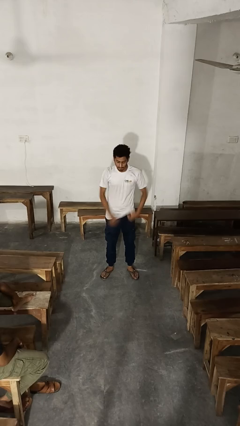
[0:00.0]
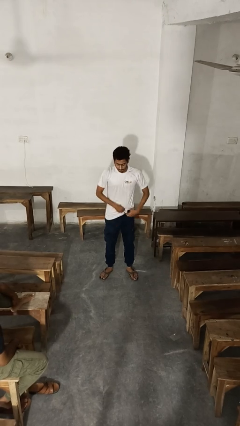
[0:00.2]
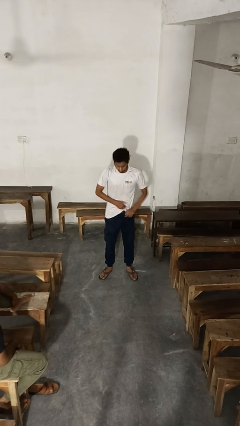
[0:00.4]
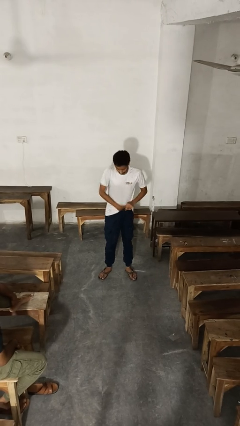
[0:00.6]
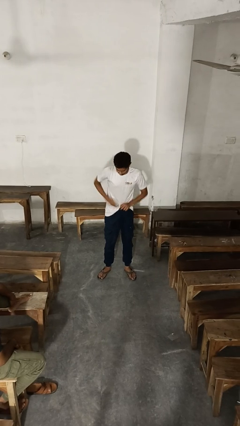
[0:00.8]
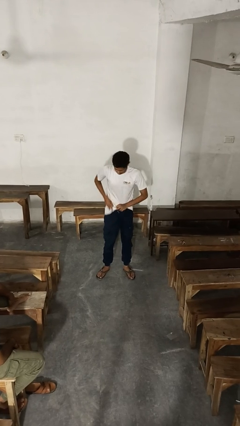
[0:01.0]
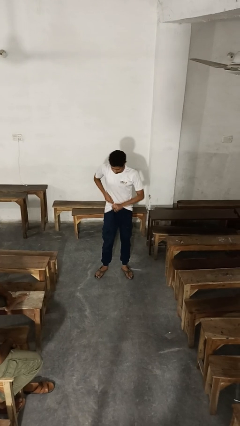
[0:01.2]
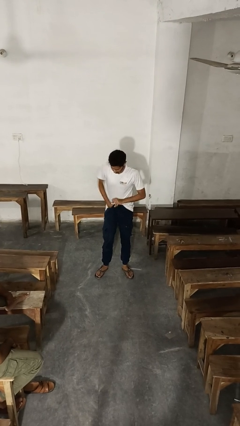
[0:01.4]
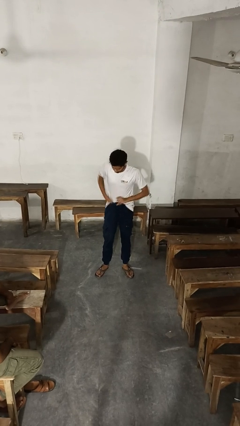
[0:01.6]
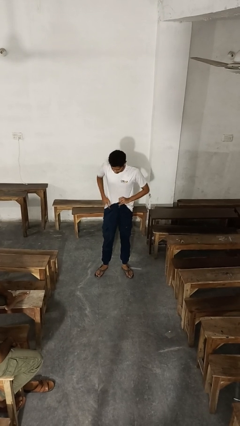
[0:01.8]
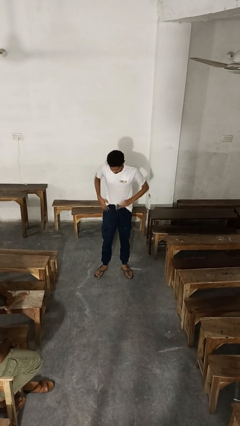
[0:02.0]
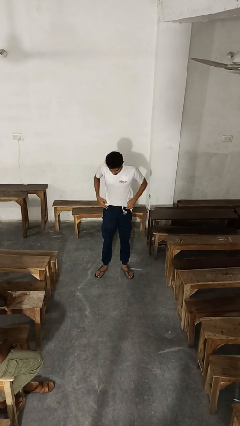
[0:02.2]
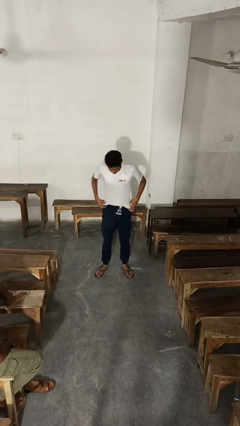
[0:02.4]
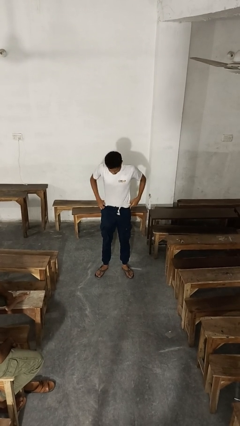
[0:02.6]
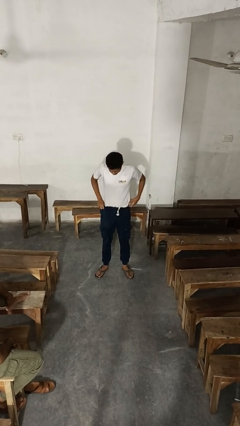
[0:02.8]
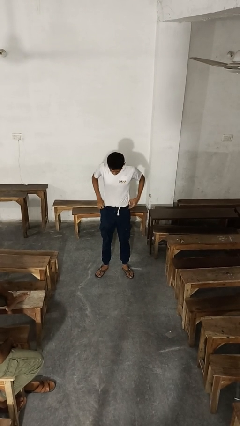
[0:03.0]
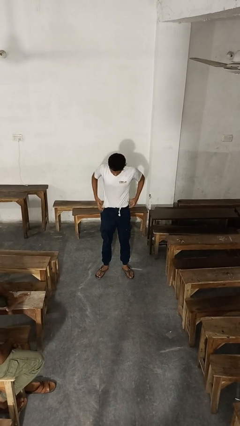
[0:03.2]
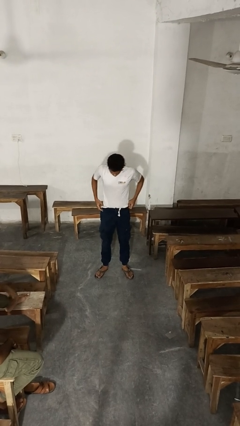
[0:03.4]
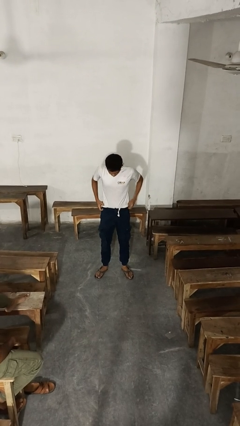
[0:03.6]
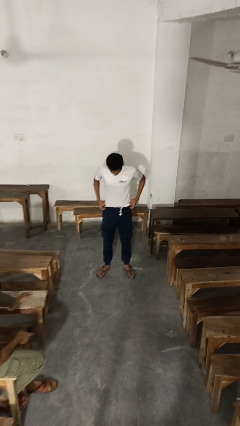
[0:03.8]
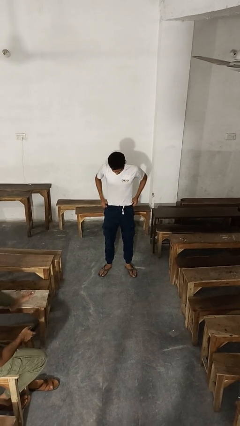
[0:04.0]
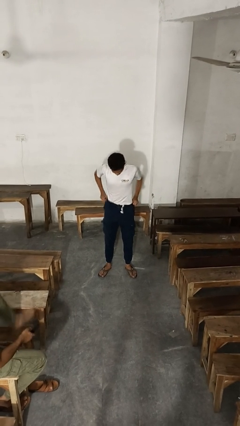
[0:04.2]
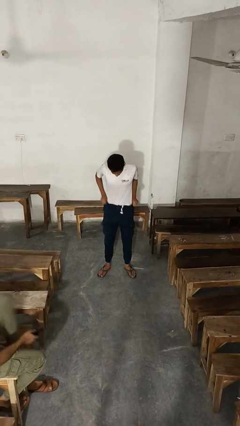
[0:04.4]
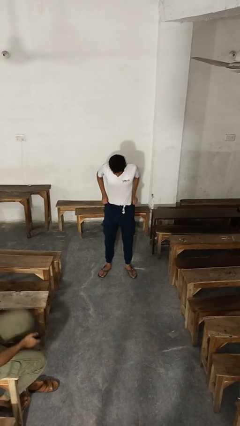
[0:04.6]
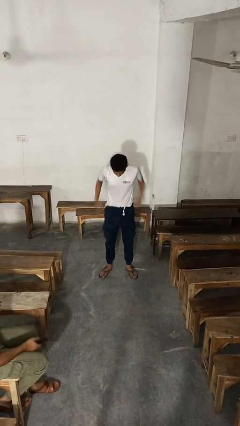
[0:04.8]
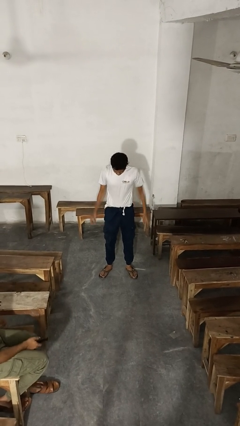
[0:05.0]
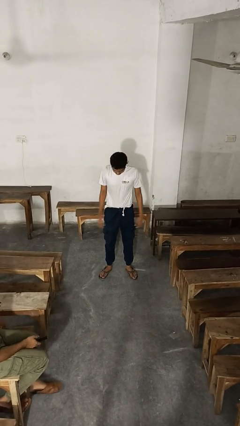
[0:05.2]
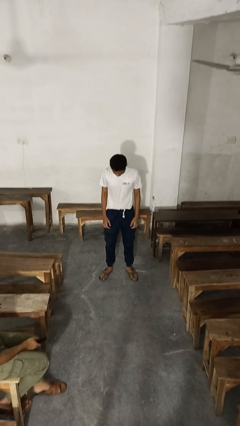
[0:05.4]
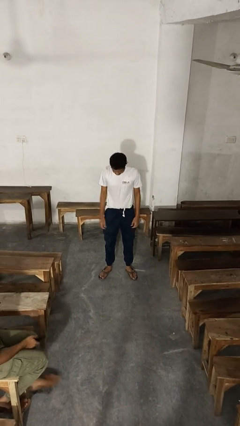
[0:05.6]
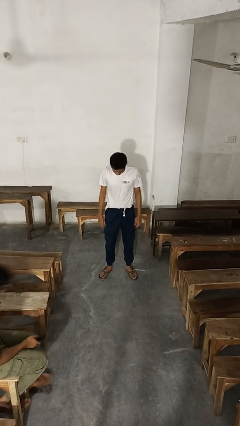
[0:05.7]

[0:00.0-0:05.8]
person tucks in shirt

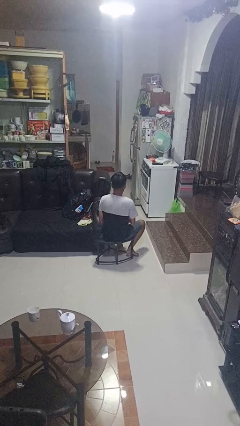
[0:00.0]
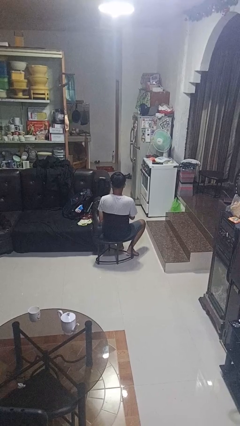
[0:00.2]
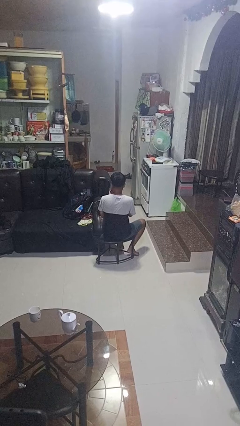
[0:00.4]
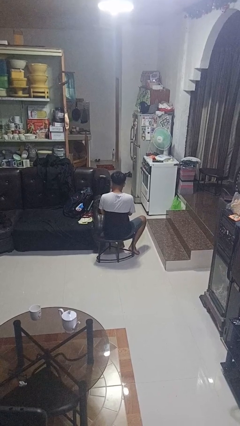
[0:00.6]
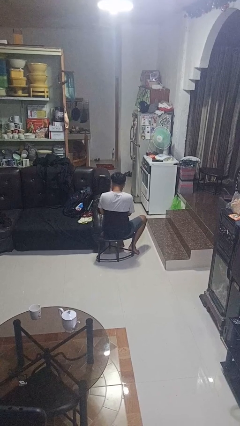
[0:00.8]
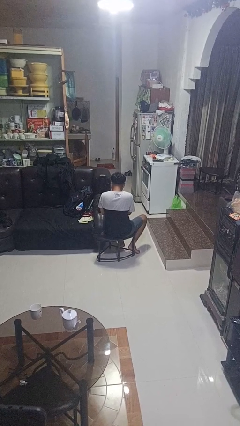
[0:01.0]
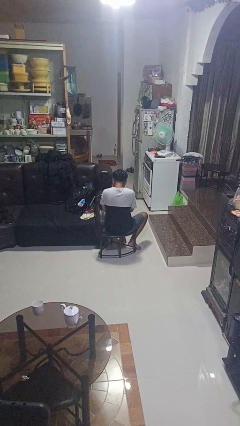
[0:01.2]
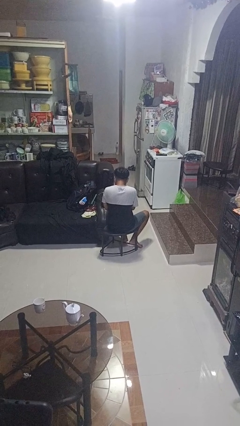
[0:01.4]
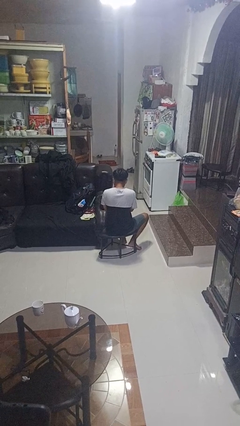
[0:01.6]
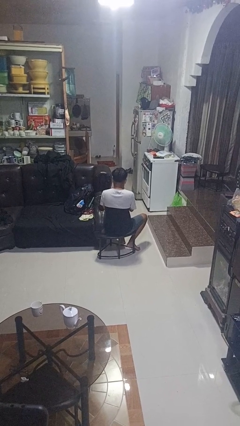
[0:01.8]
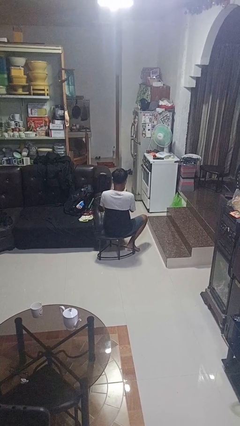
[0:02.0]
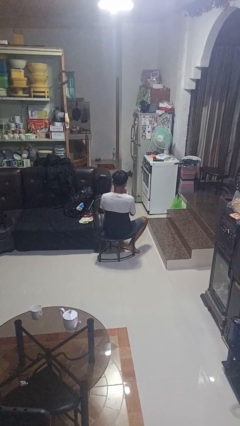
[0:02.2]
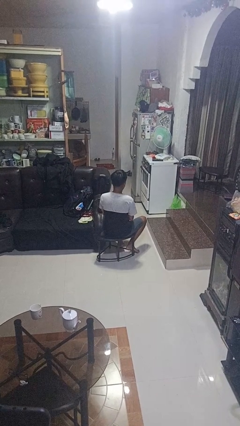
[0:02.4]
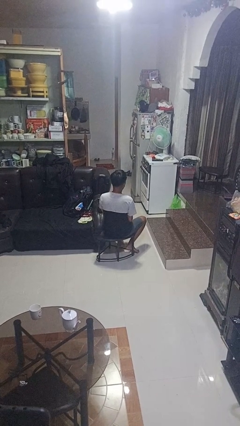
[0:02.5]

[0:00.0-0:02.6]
person blows nose

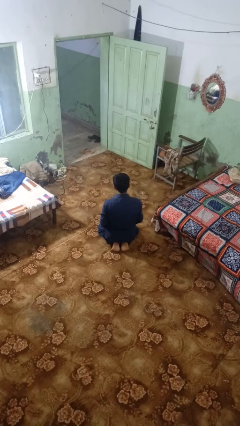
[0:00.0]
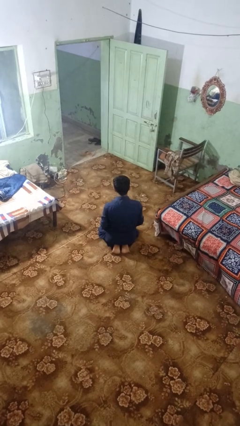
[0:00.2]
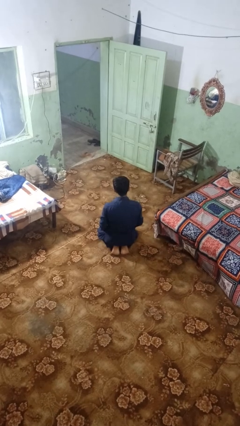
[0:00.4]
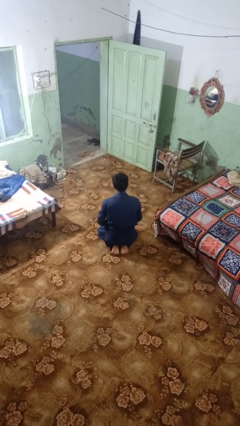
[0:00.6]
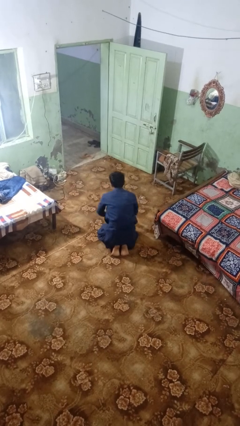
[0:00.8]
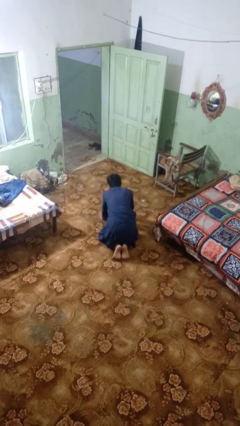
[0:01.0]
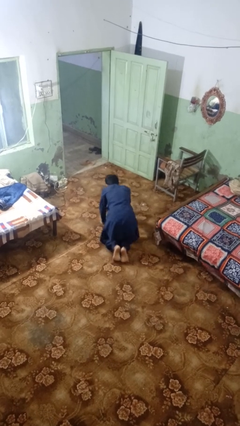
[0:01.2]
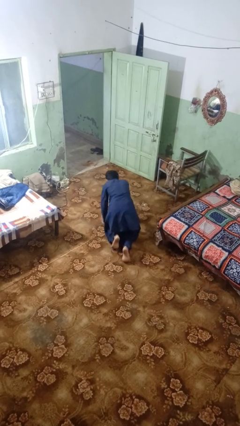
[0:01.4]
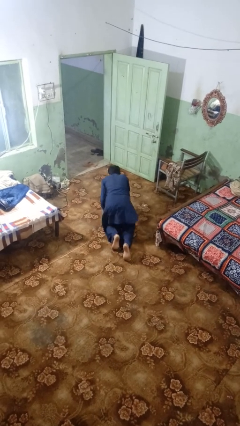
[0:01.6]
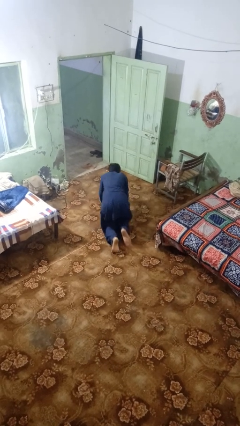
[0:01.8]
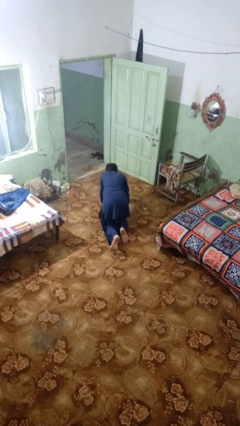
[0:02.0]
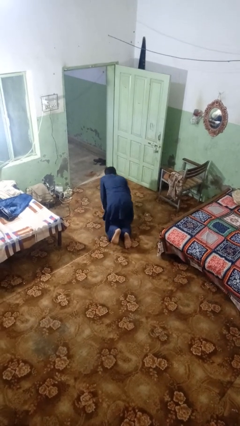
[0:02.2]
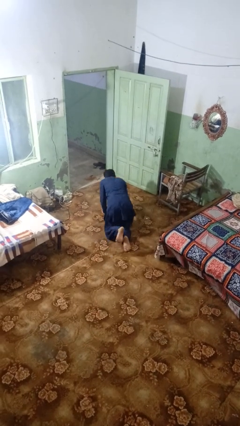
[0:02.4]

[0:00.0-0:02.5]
person crawls

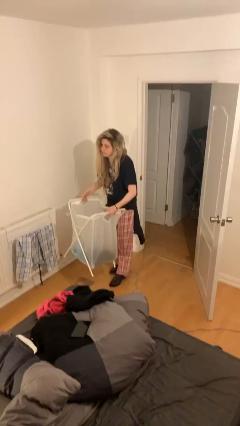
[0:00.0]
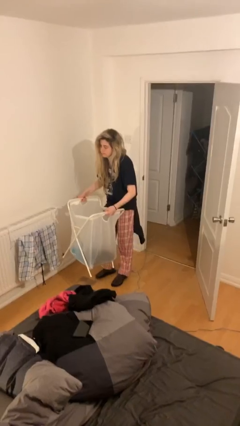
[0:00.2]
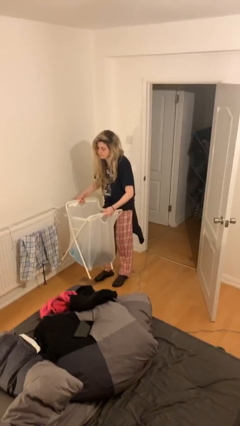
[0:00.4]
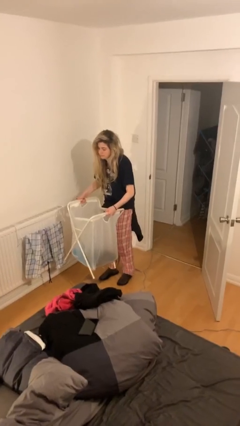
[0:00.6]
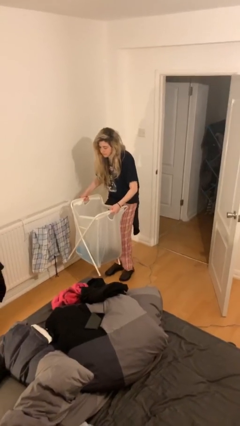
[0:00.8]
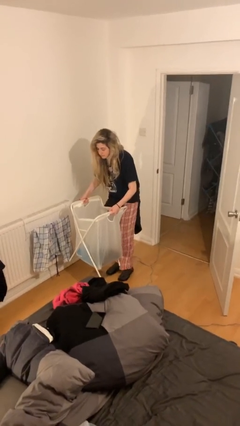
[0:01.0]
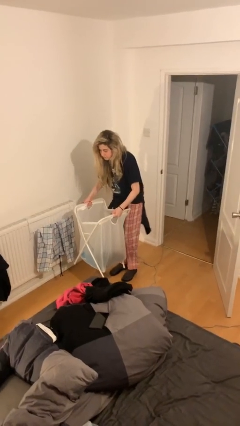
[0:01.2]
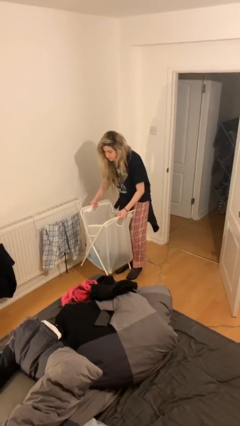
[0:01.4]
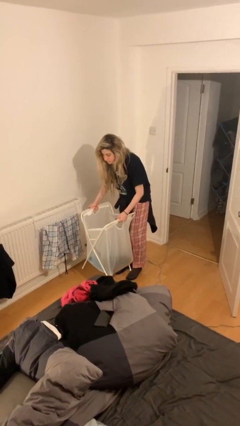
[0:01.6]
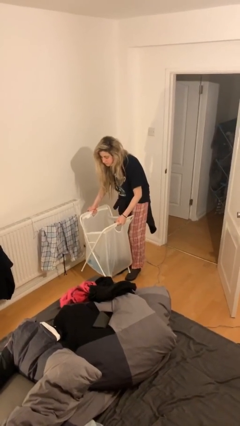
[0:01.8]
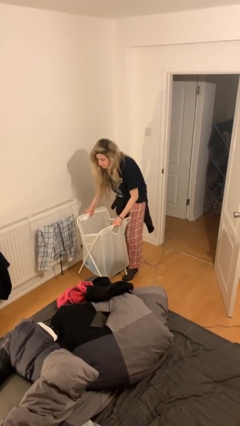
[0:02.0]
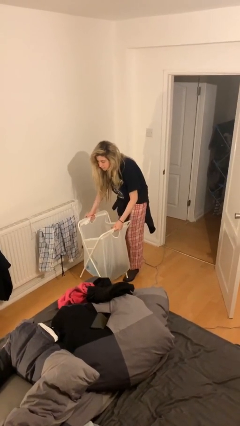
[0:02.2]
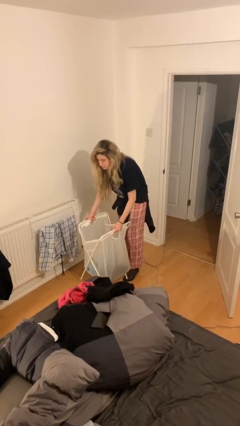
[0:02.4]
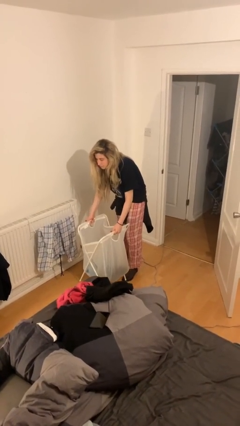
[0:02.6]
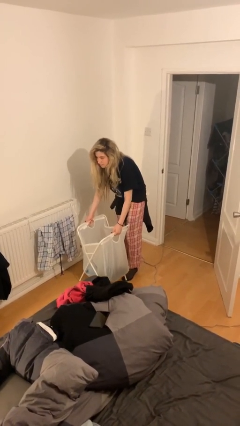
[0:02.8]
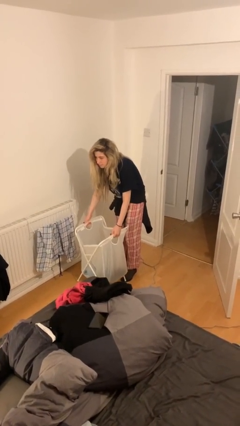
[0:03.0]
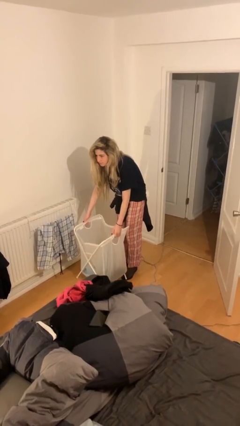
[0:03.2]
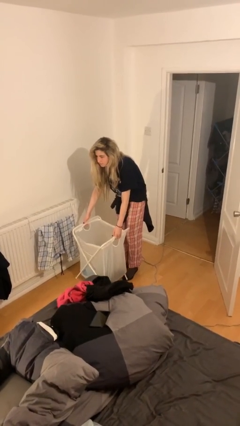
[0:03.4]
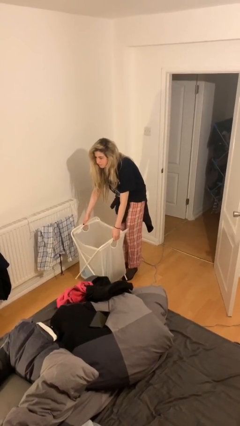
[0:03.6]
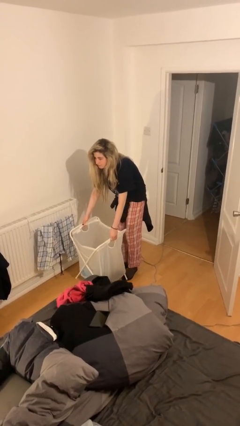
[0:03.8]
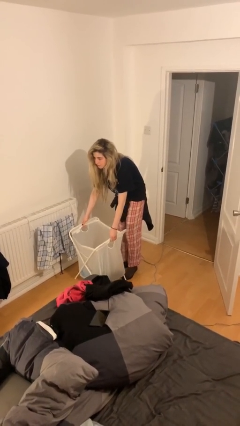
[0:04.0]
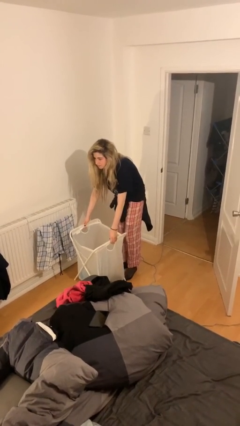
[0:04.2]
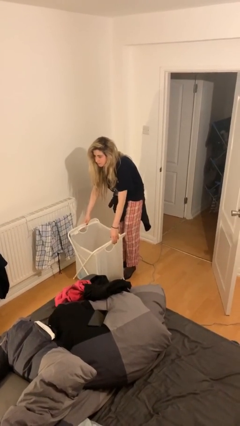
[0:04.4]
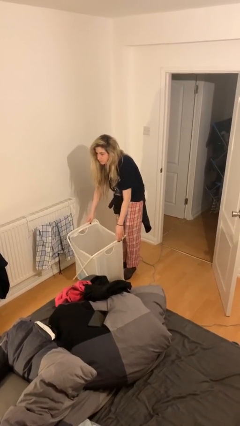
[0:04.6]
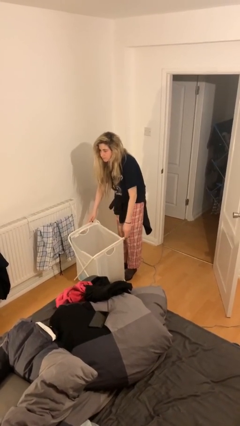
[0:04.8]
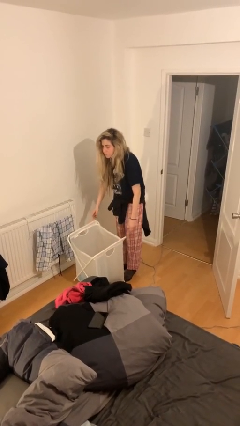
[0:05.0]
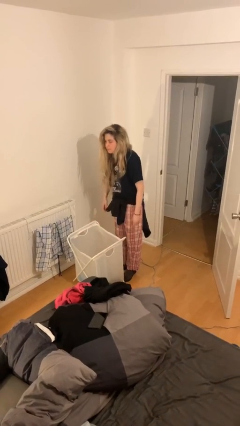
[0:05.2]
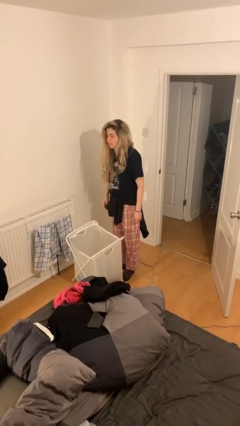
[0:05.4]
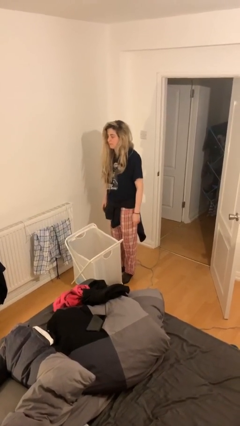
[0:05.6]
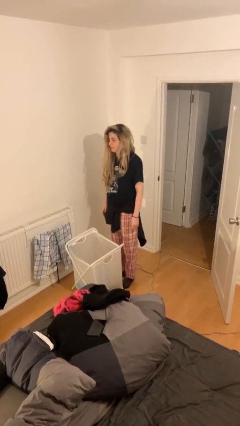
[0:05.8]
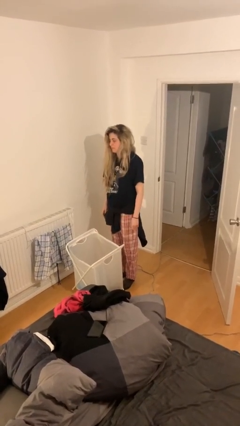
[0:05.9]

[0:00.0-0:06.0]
person puts down object on floor

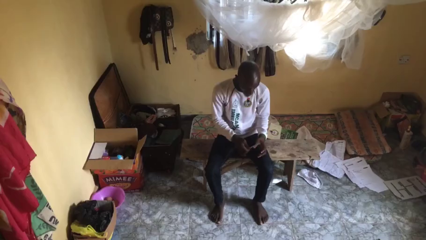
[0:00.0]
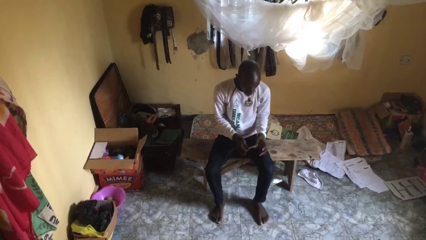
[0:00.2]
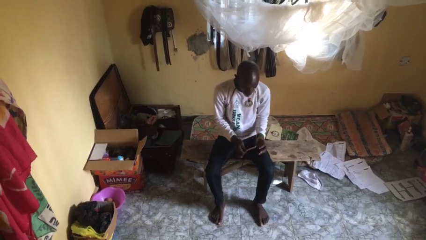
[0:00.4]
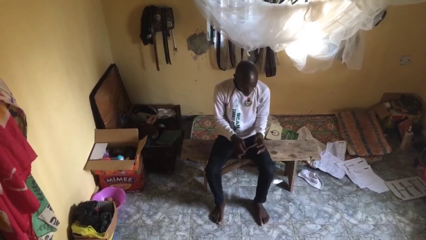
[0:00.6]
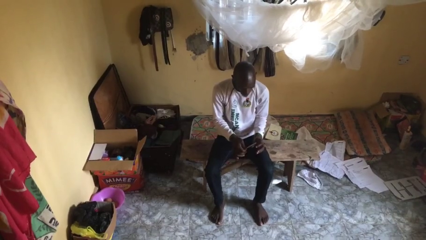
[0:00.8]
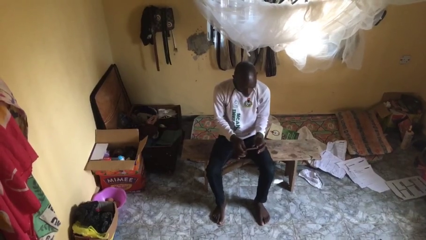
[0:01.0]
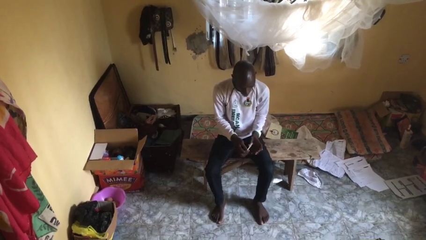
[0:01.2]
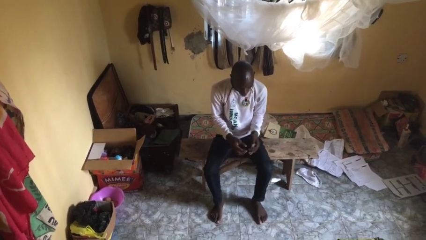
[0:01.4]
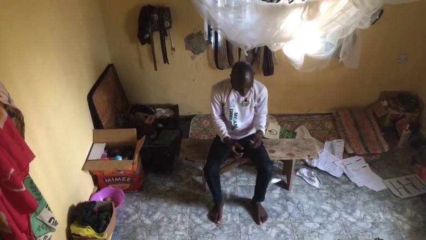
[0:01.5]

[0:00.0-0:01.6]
person files fingernails
